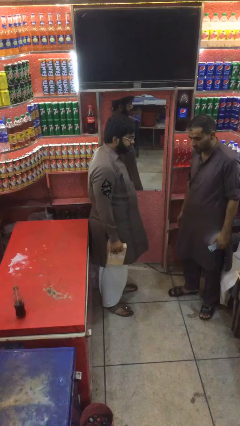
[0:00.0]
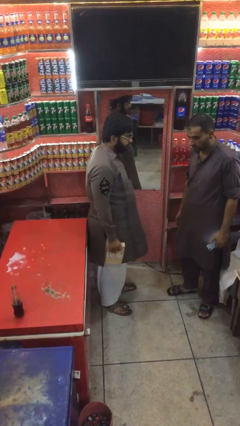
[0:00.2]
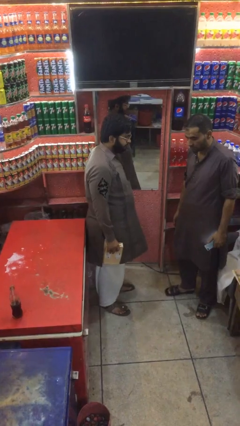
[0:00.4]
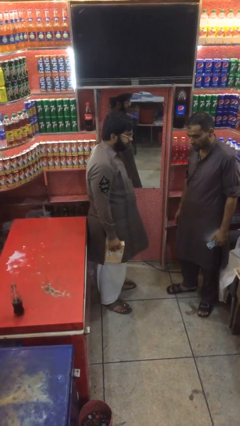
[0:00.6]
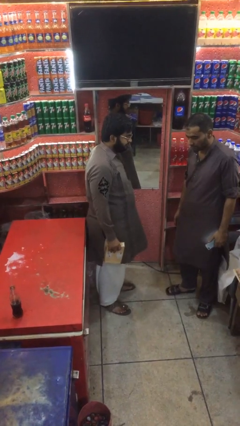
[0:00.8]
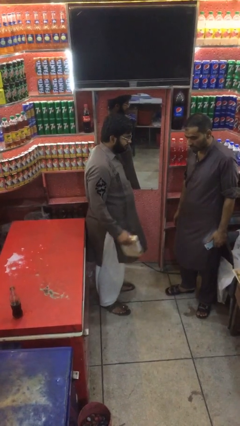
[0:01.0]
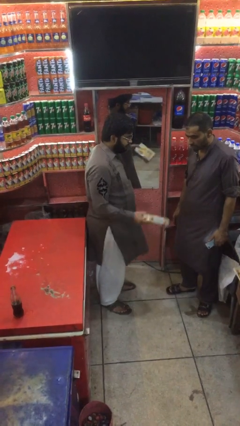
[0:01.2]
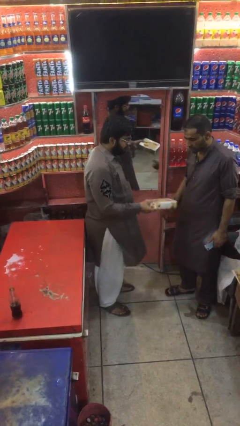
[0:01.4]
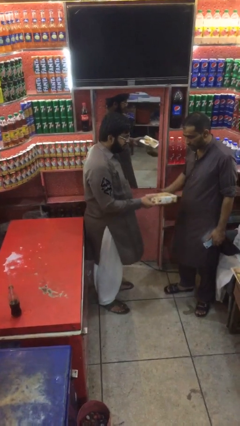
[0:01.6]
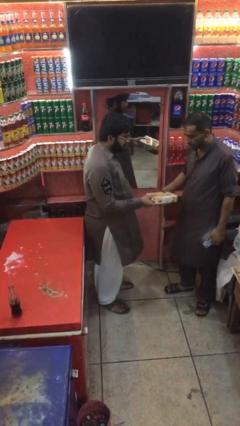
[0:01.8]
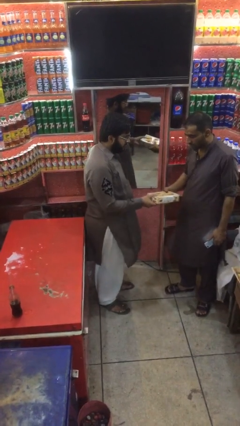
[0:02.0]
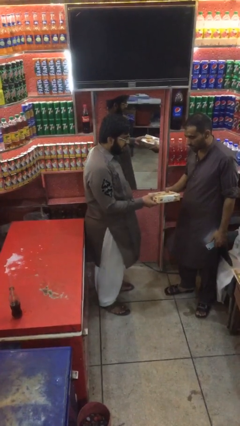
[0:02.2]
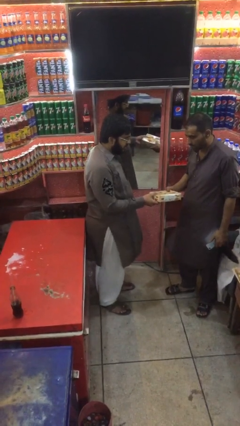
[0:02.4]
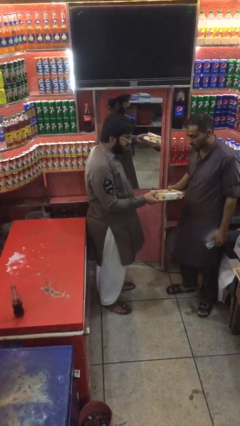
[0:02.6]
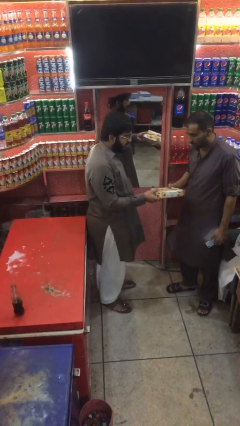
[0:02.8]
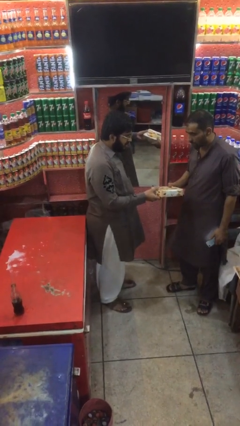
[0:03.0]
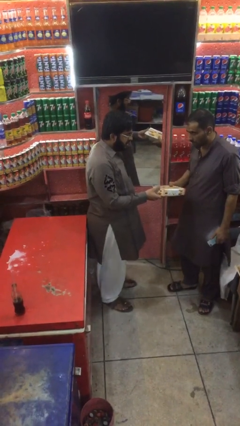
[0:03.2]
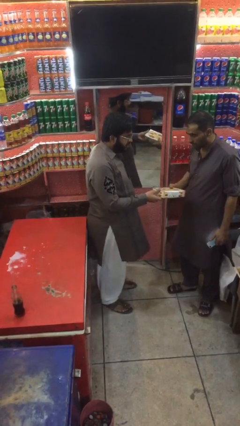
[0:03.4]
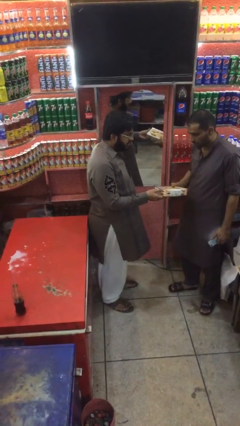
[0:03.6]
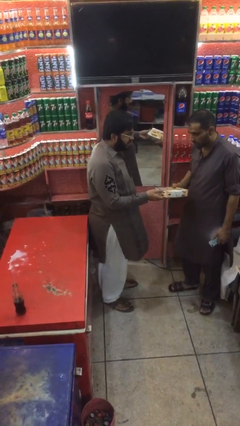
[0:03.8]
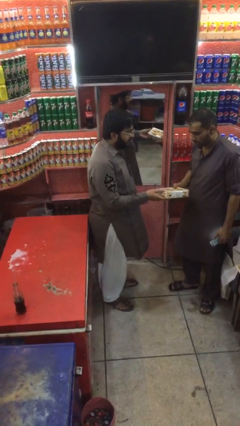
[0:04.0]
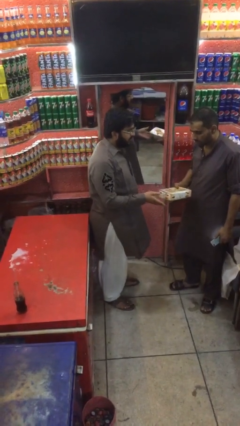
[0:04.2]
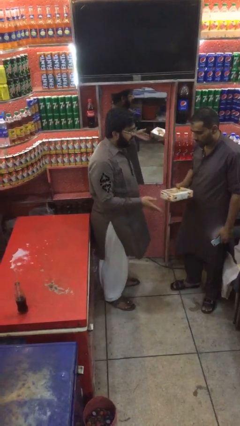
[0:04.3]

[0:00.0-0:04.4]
person transfers object to person

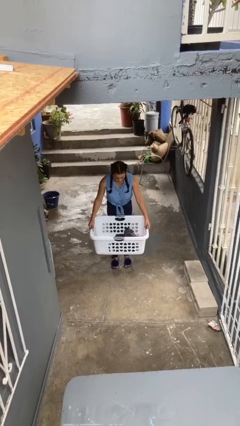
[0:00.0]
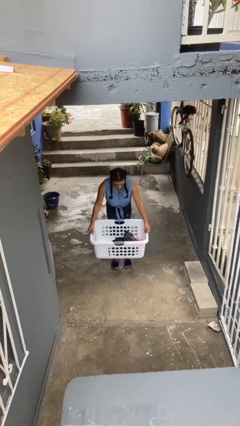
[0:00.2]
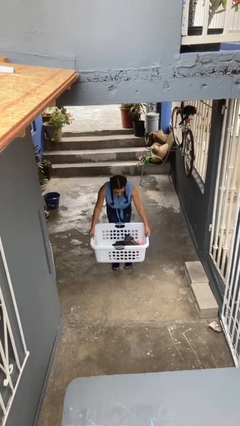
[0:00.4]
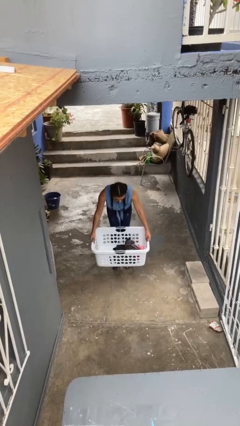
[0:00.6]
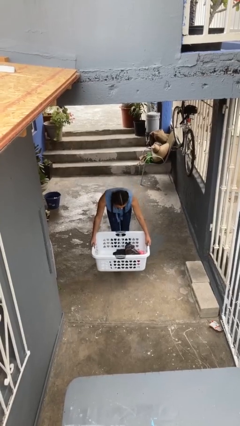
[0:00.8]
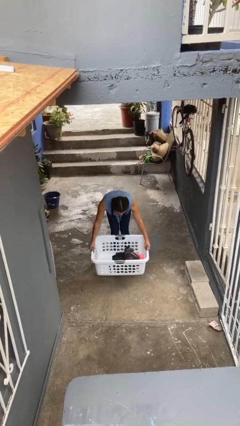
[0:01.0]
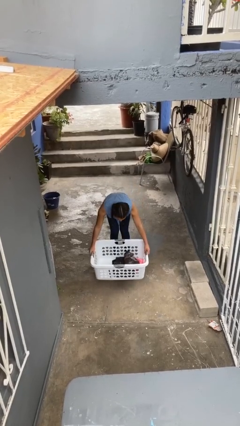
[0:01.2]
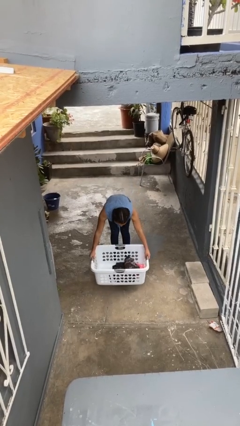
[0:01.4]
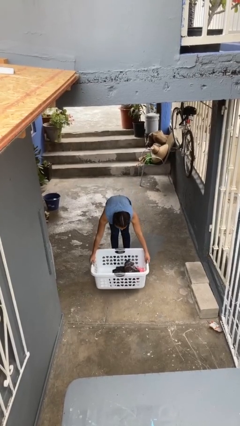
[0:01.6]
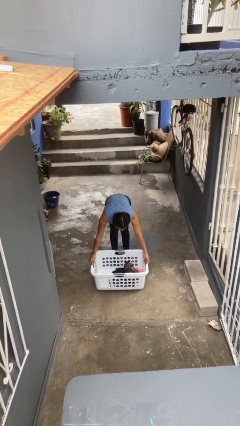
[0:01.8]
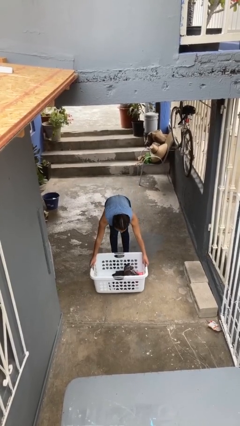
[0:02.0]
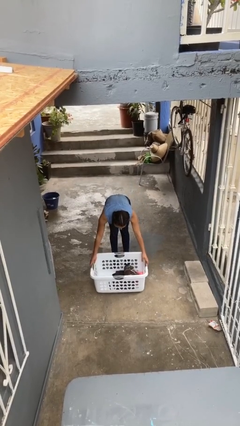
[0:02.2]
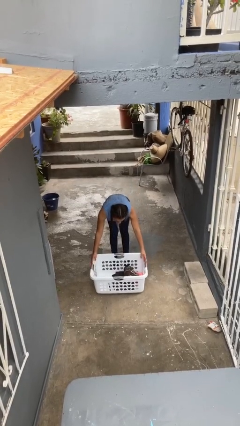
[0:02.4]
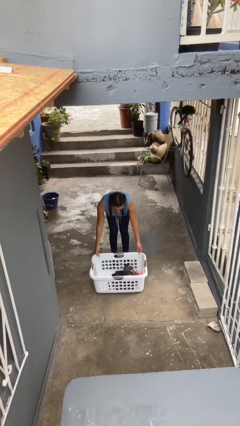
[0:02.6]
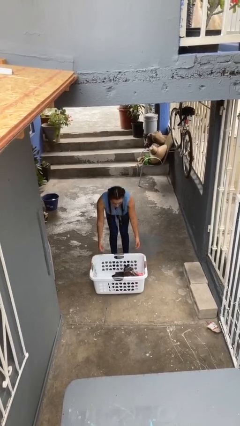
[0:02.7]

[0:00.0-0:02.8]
person puts down object on floor

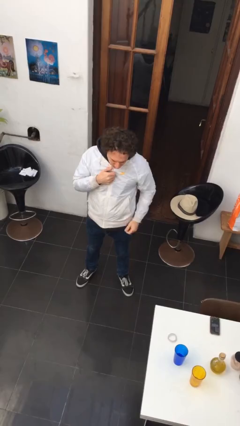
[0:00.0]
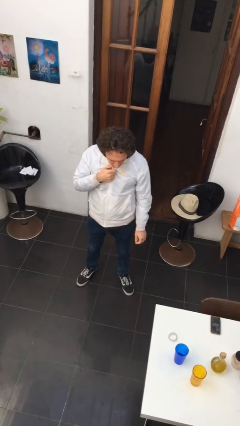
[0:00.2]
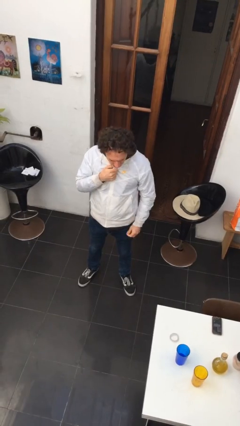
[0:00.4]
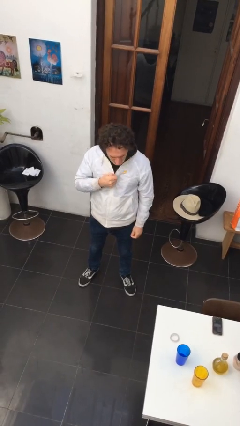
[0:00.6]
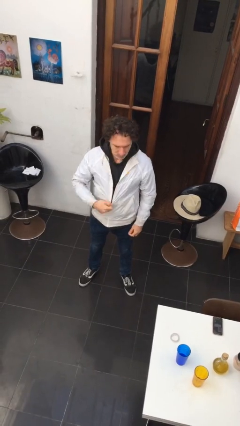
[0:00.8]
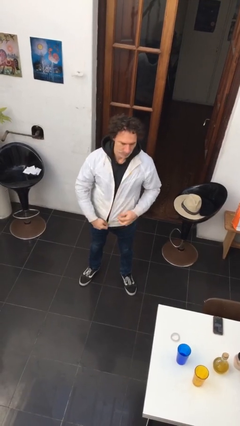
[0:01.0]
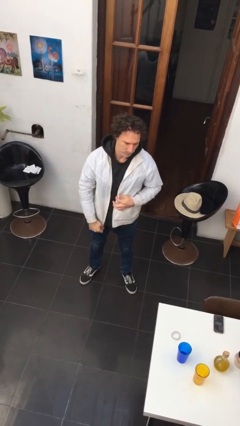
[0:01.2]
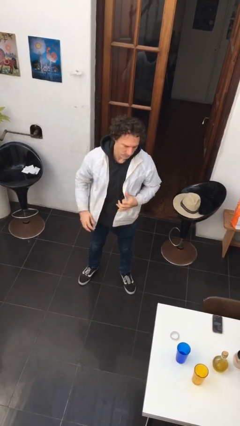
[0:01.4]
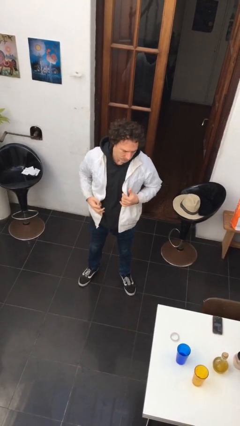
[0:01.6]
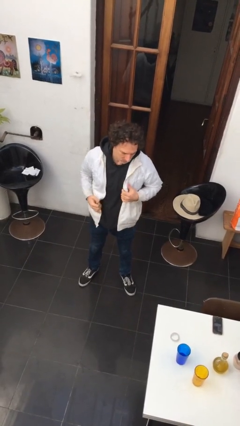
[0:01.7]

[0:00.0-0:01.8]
person unzips jacket

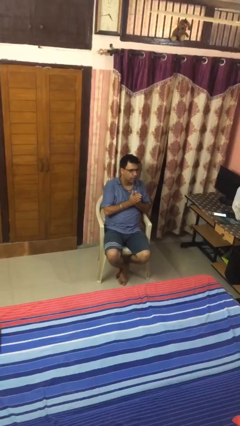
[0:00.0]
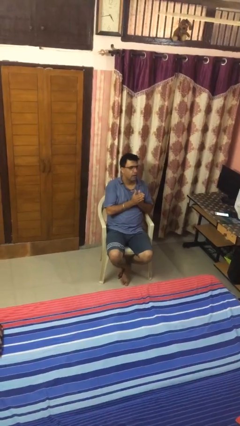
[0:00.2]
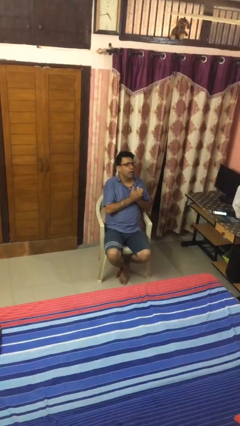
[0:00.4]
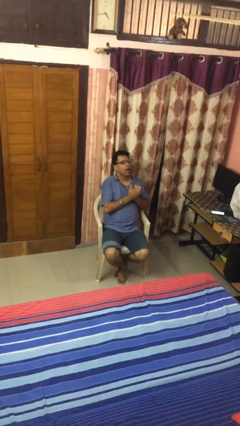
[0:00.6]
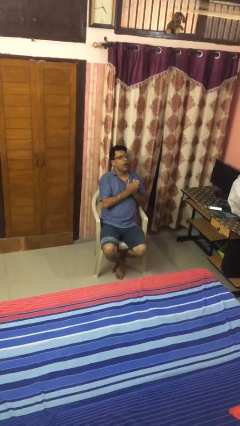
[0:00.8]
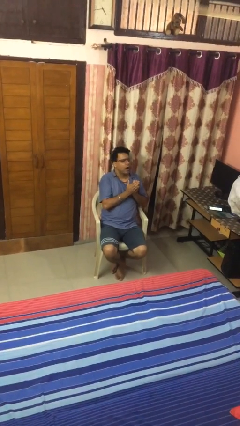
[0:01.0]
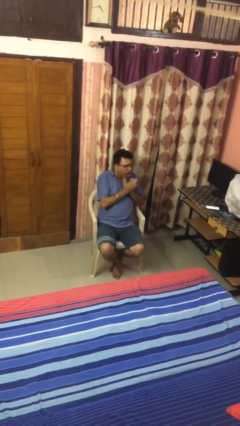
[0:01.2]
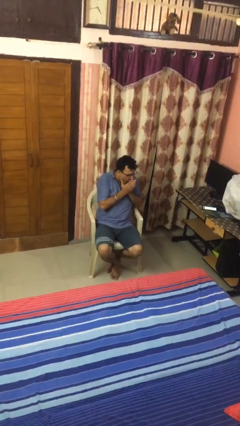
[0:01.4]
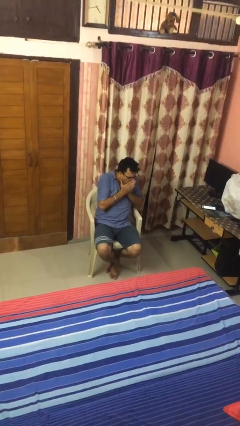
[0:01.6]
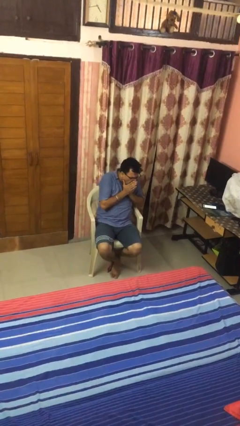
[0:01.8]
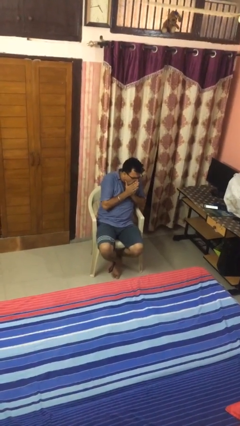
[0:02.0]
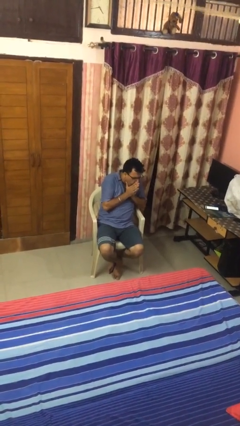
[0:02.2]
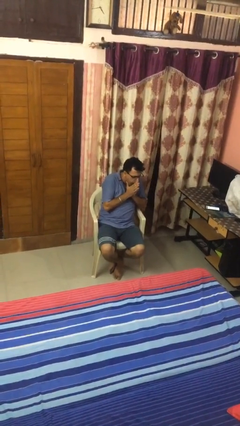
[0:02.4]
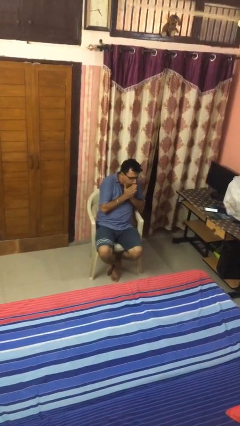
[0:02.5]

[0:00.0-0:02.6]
person sneezes into hand

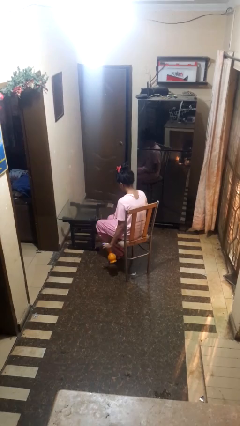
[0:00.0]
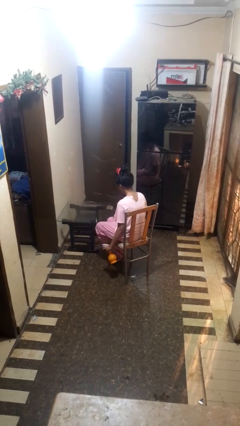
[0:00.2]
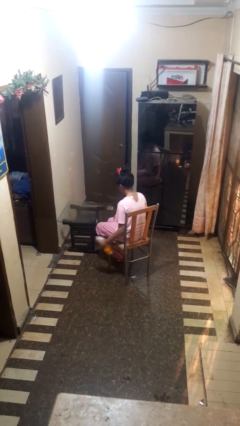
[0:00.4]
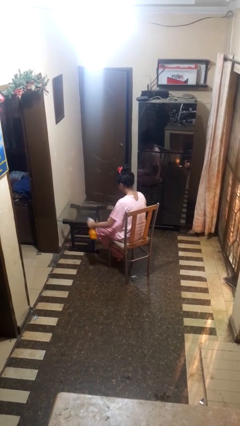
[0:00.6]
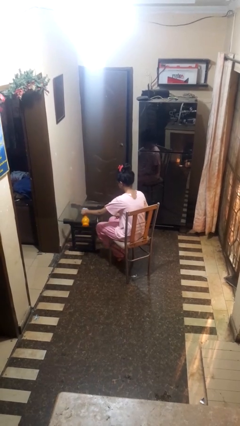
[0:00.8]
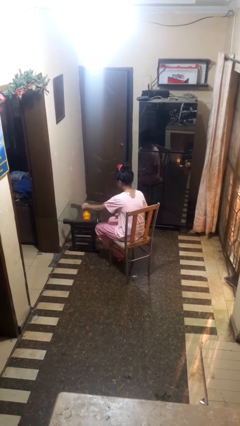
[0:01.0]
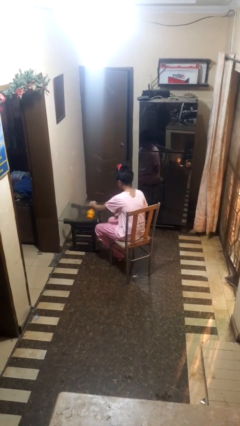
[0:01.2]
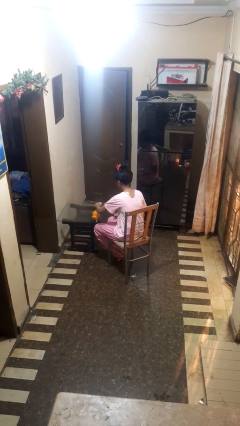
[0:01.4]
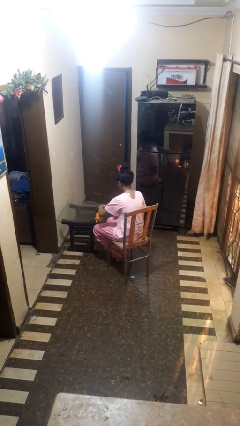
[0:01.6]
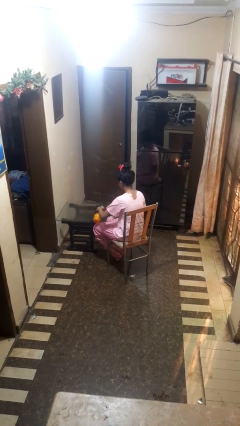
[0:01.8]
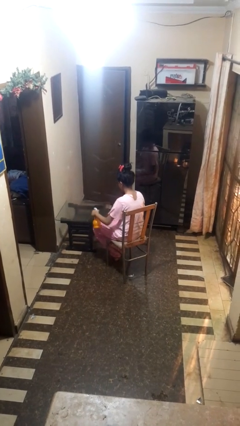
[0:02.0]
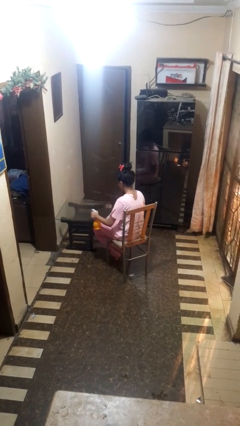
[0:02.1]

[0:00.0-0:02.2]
person sprays from bottle

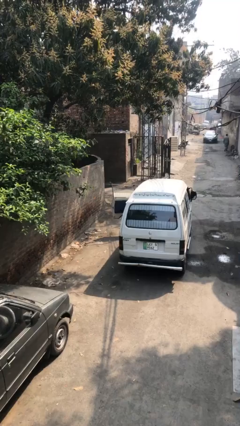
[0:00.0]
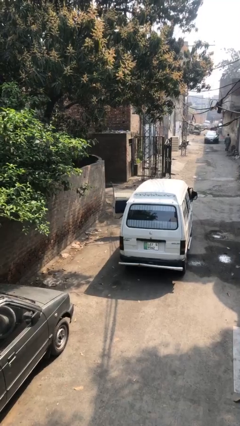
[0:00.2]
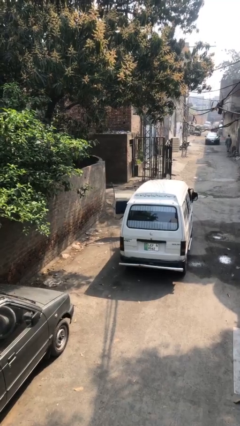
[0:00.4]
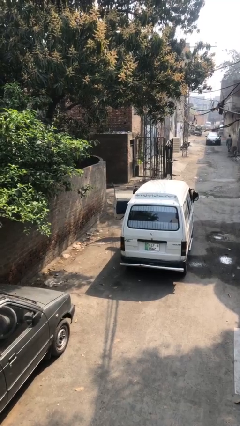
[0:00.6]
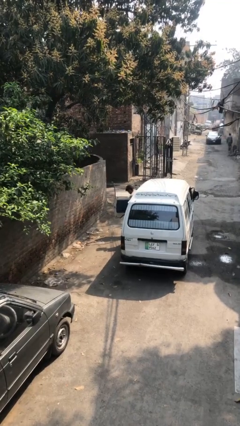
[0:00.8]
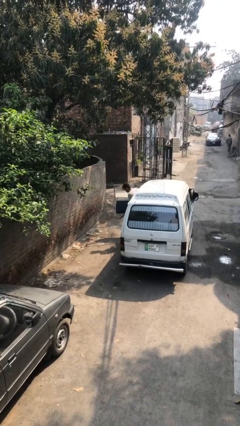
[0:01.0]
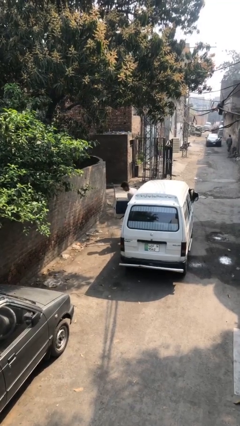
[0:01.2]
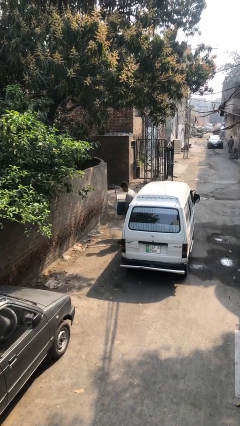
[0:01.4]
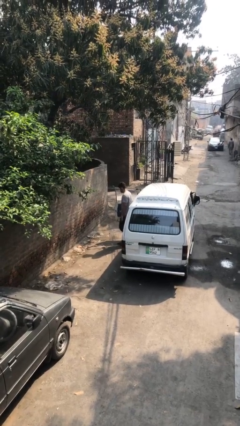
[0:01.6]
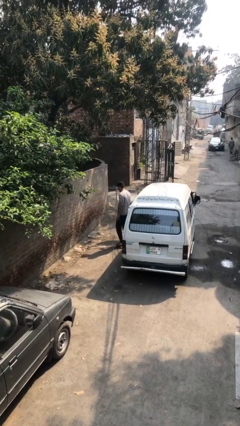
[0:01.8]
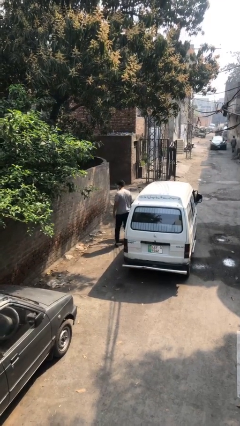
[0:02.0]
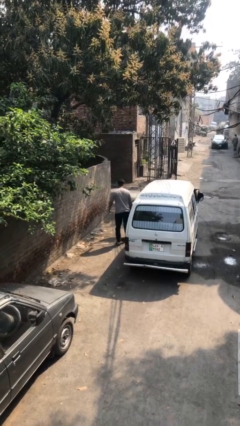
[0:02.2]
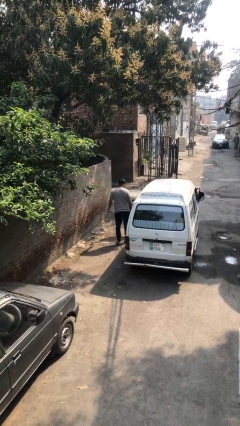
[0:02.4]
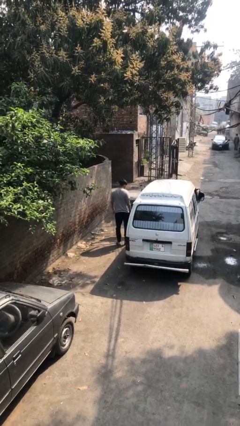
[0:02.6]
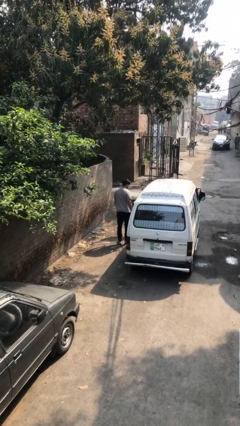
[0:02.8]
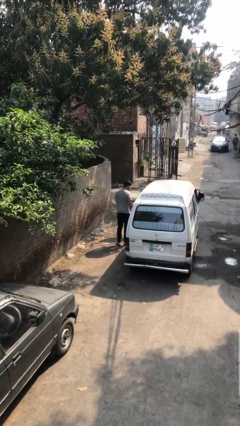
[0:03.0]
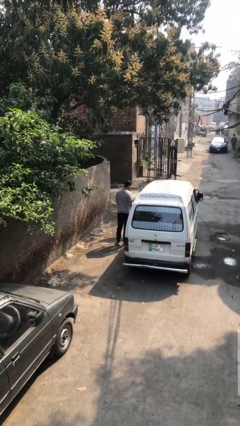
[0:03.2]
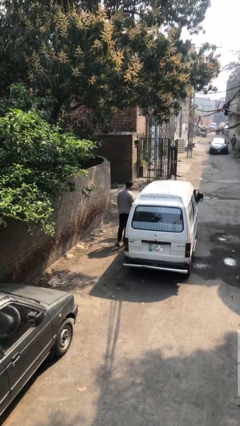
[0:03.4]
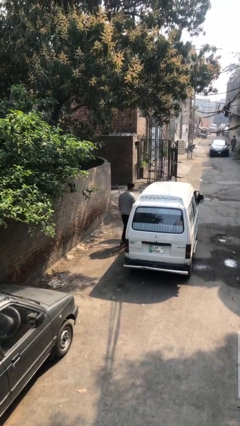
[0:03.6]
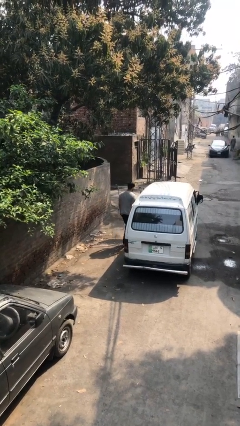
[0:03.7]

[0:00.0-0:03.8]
person exits car

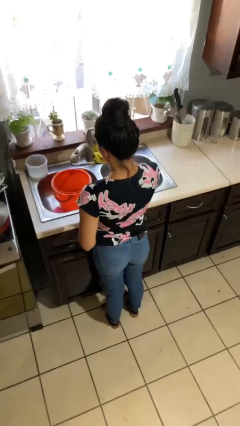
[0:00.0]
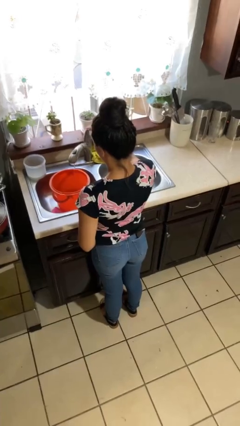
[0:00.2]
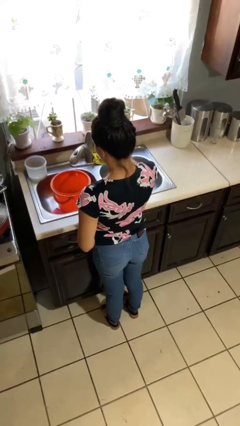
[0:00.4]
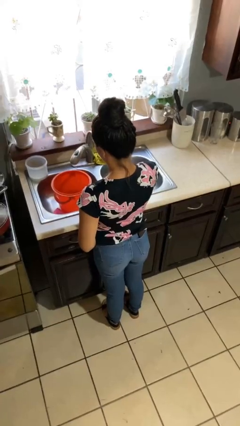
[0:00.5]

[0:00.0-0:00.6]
person turns off faucet
